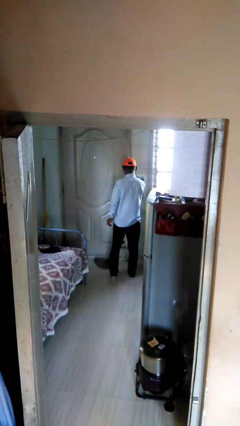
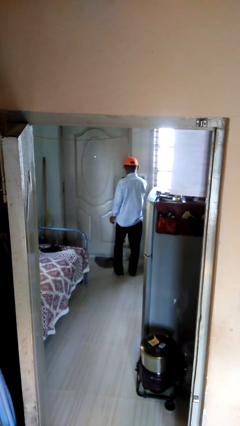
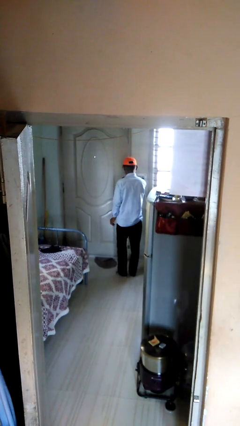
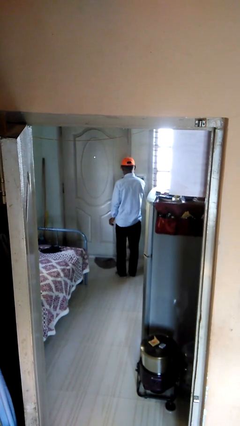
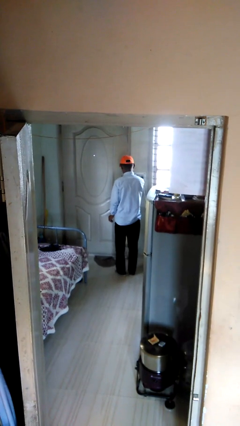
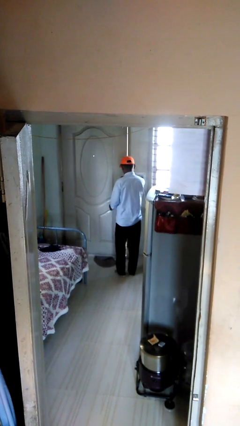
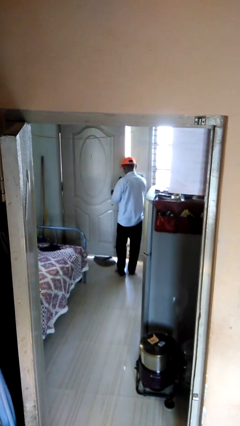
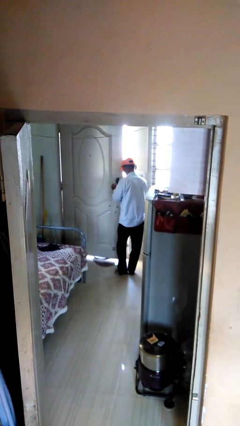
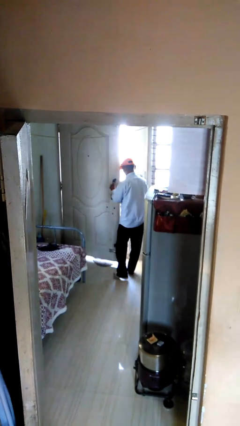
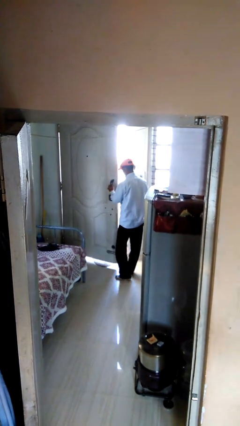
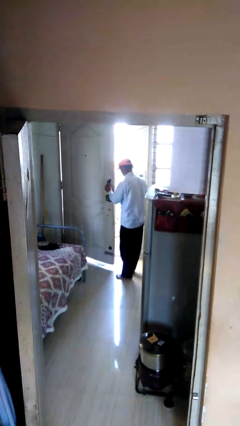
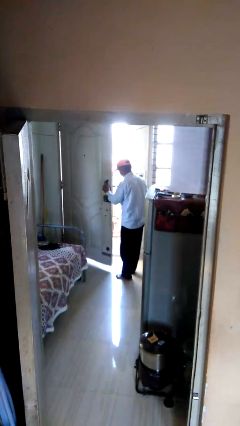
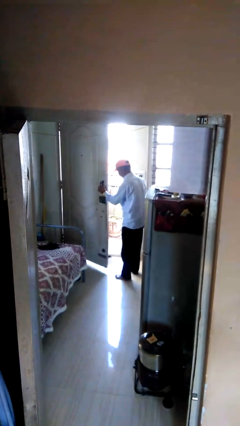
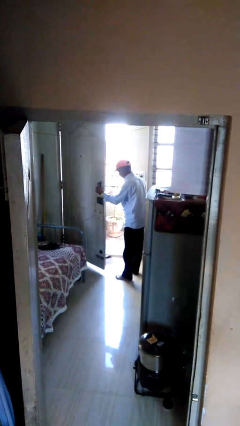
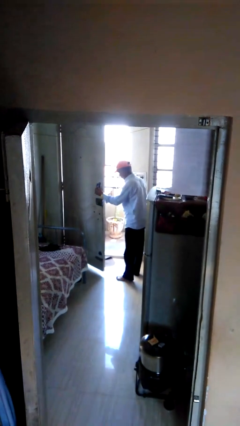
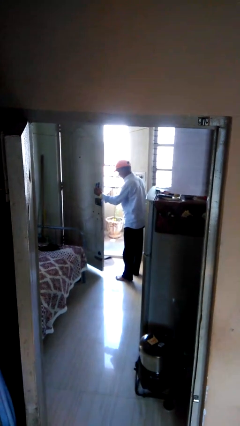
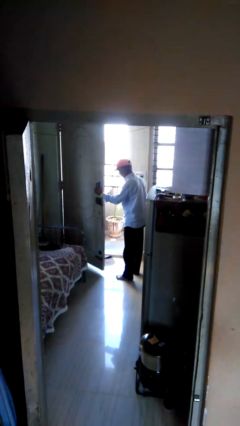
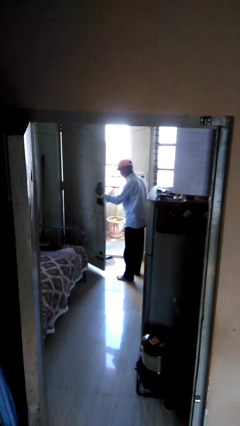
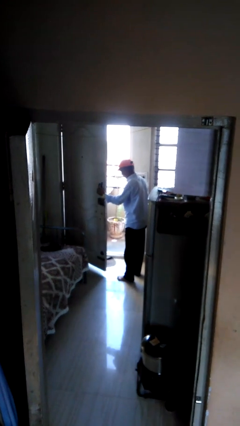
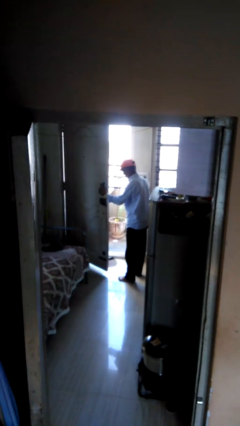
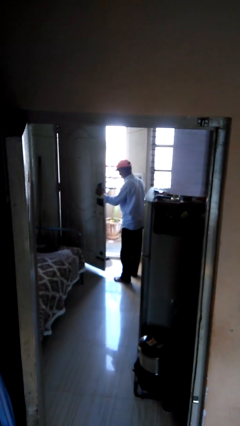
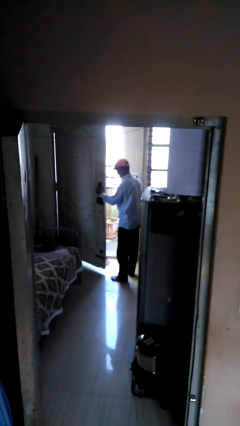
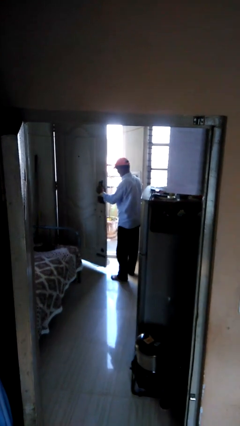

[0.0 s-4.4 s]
person opens facility door

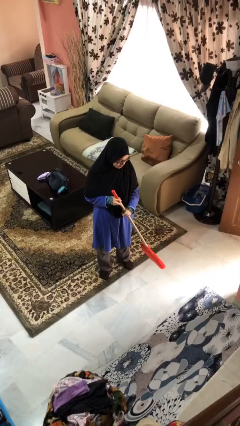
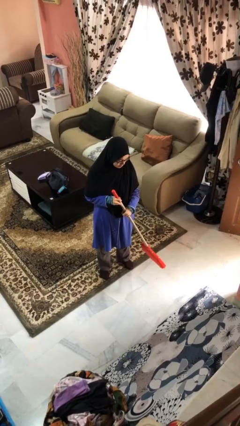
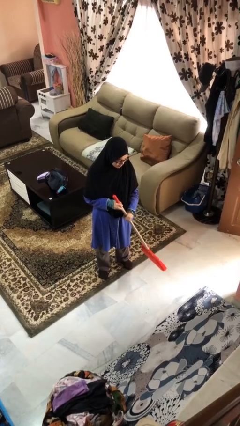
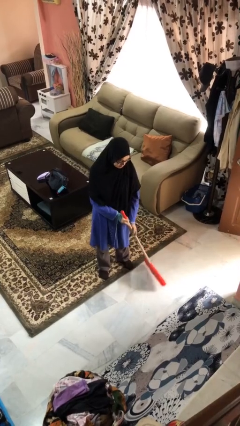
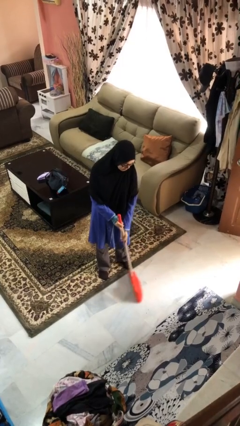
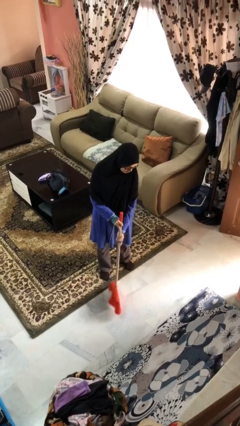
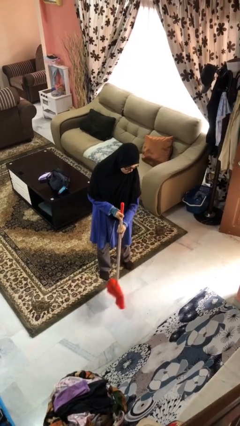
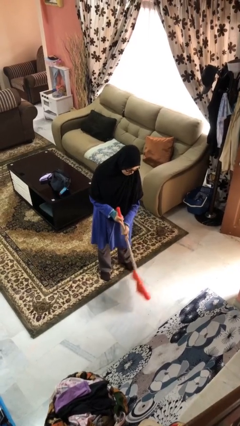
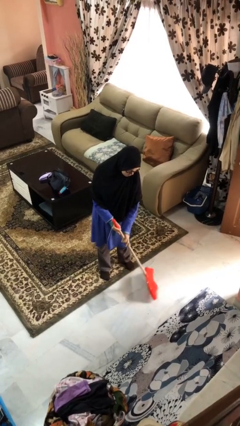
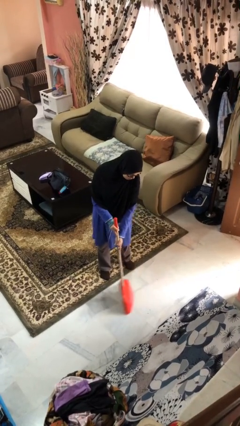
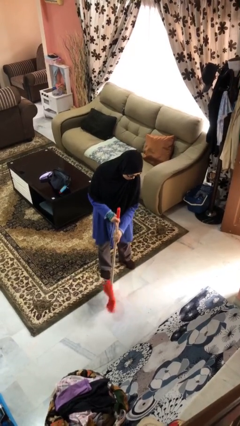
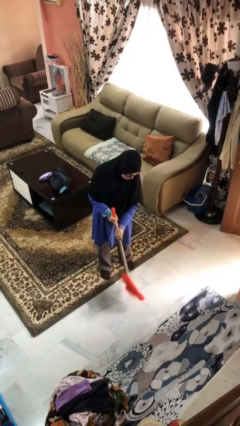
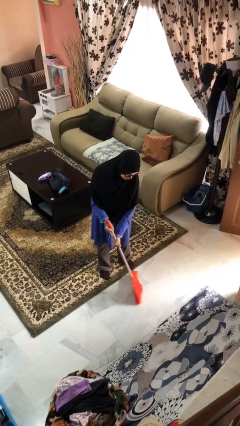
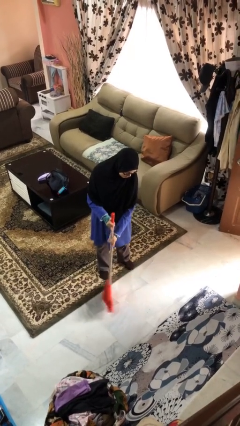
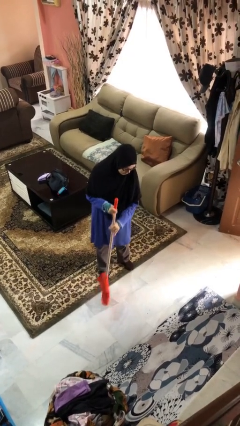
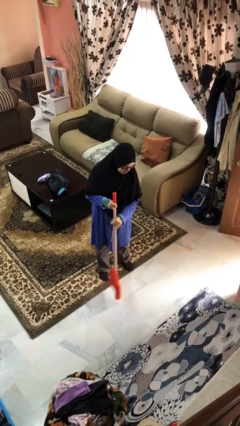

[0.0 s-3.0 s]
person sweeps floor

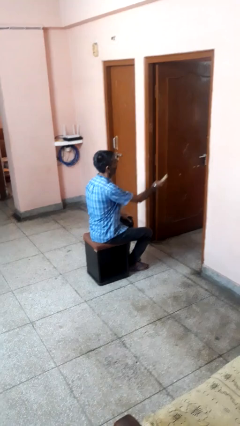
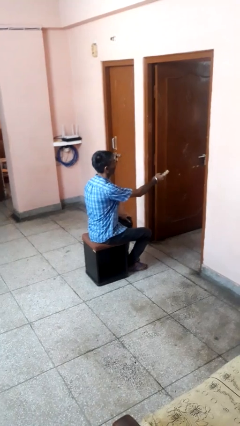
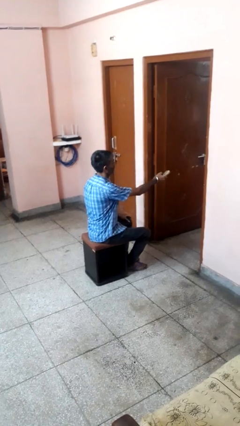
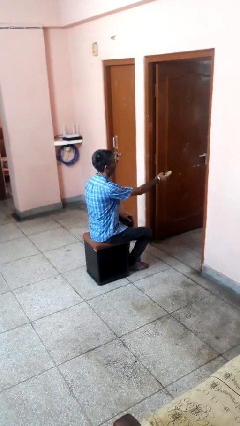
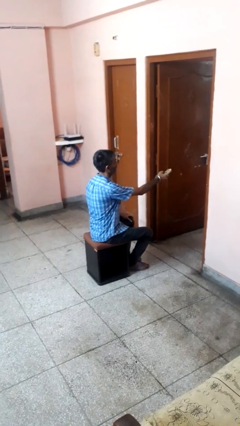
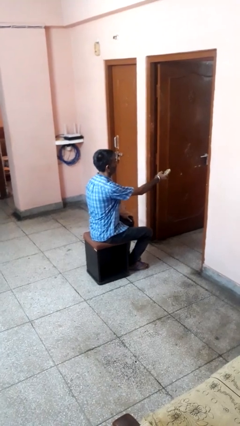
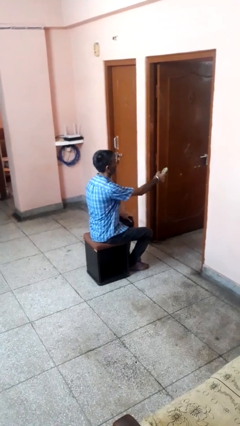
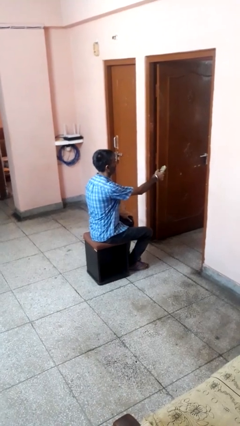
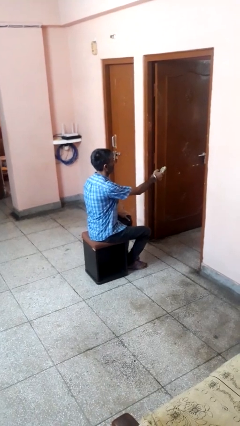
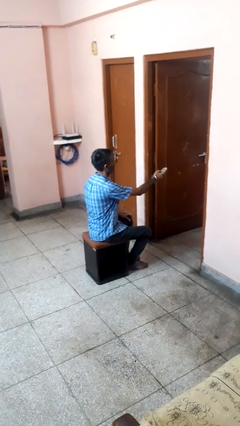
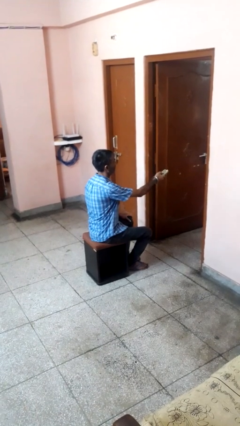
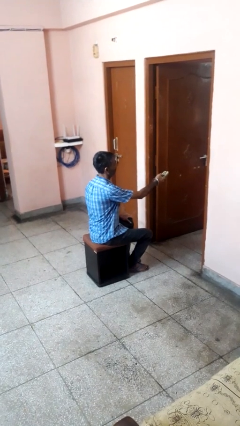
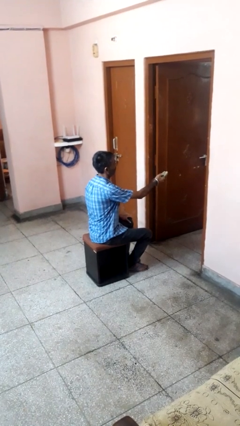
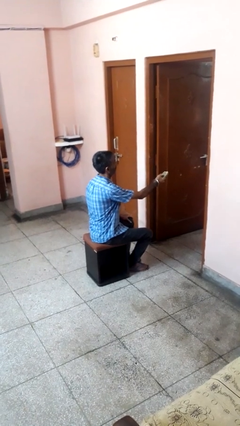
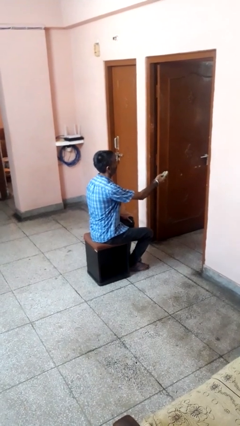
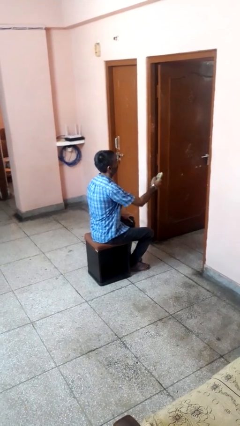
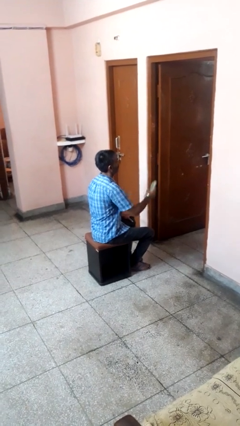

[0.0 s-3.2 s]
person uses television remote

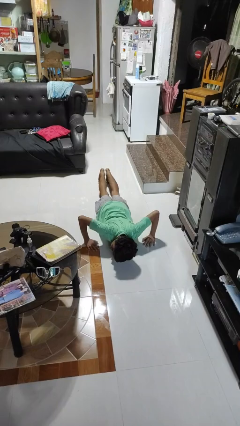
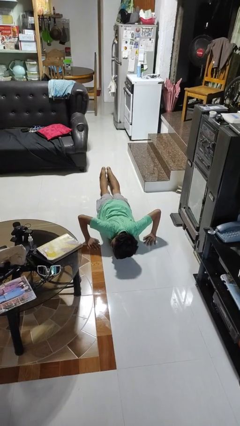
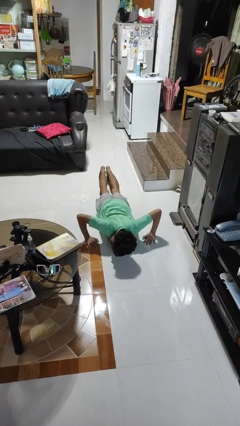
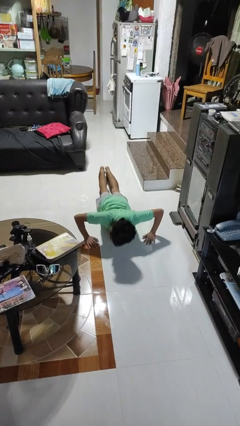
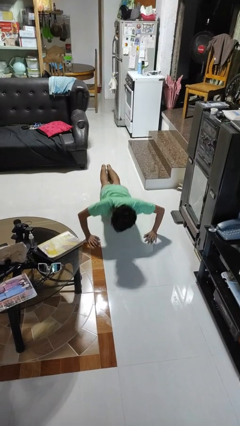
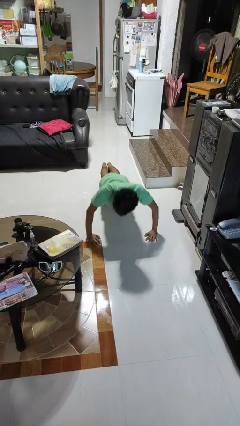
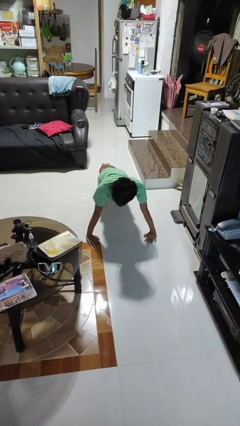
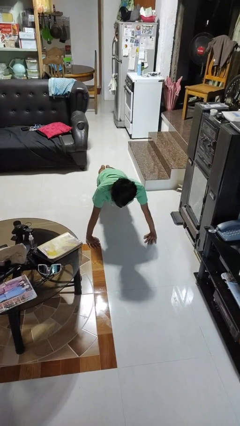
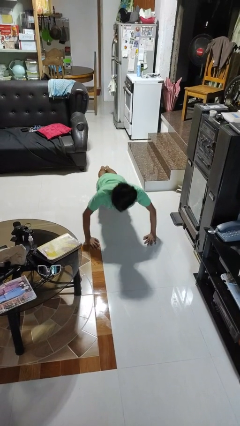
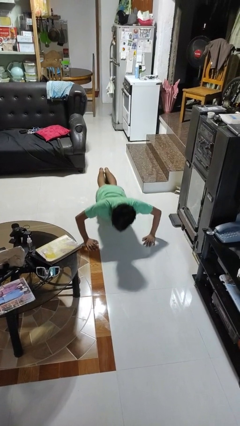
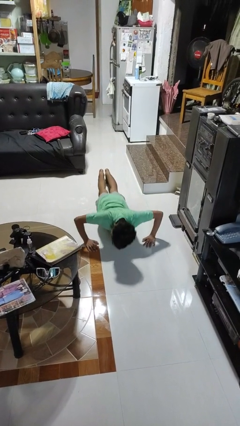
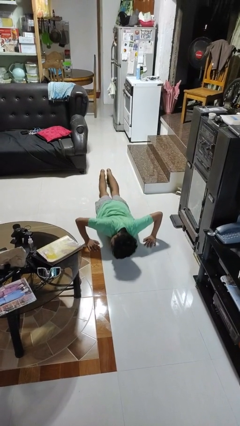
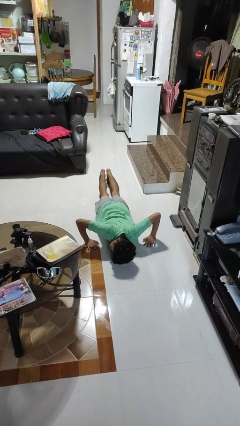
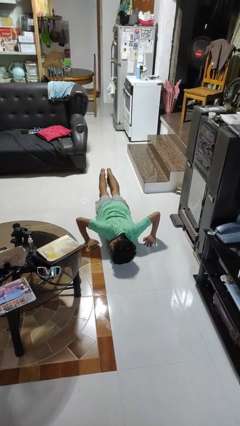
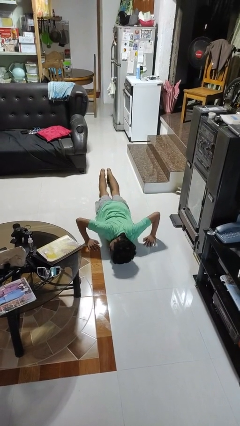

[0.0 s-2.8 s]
person exercises with pushup

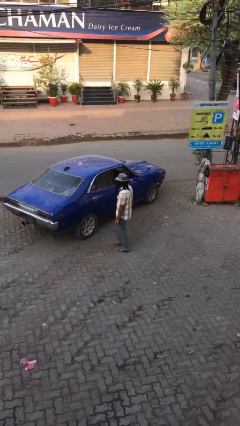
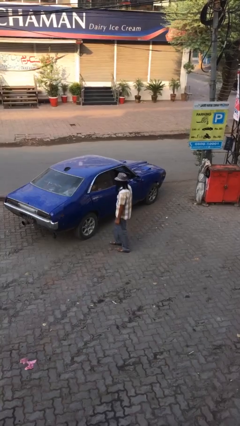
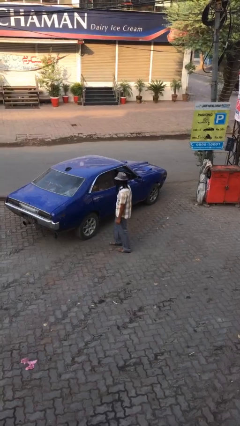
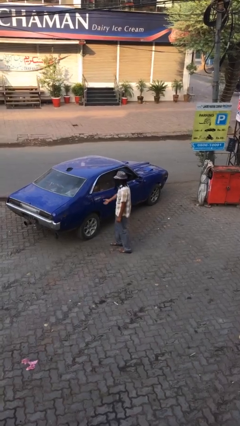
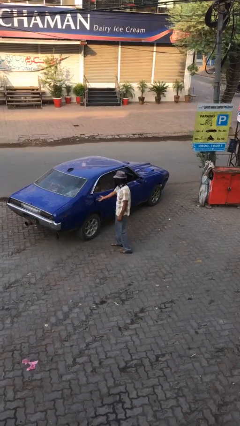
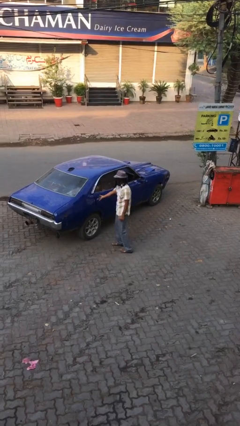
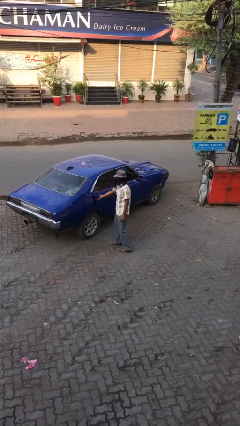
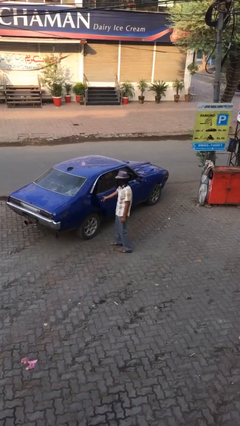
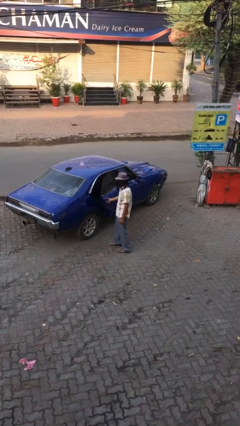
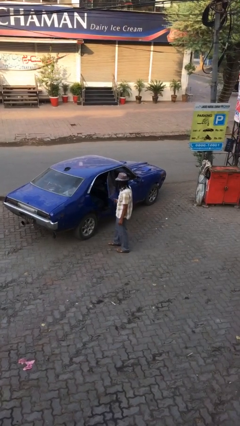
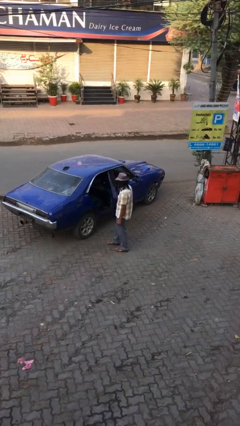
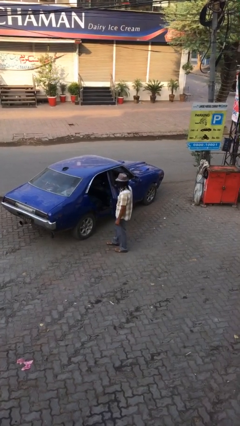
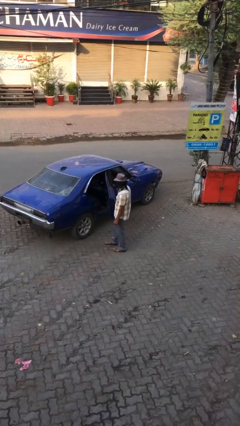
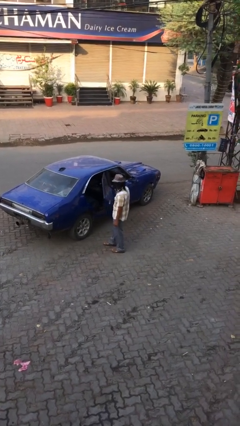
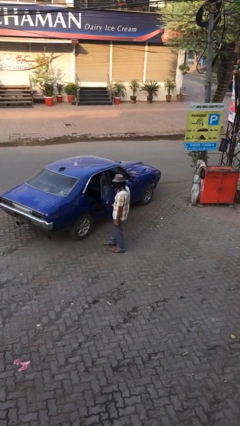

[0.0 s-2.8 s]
person opens car door

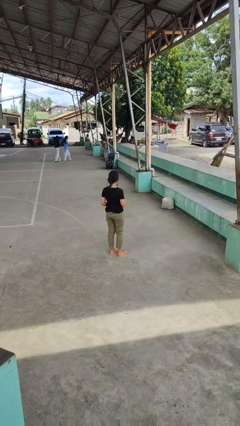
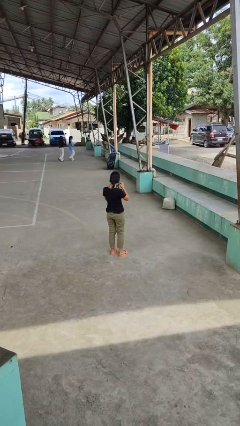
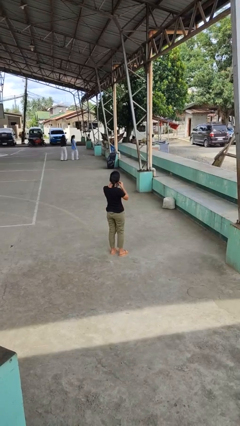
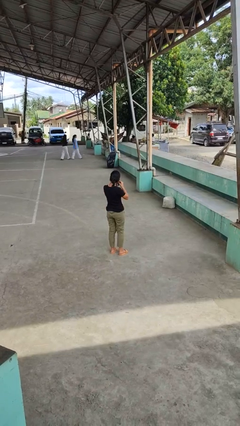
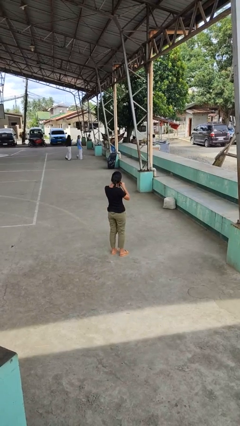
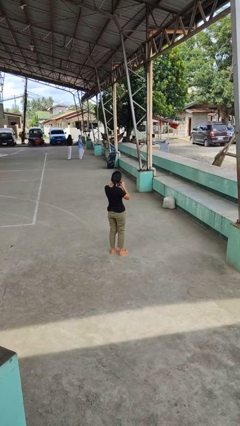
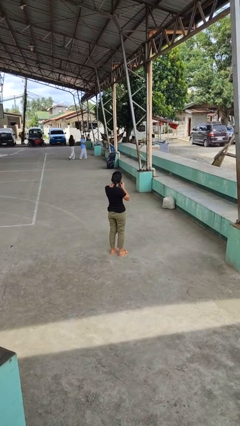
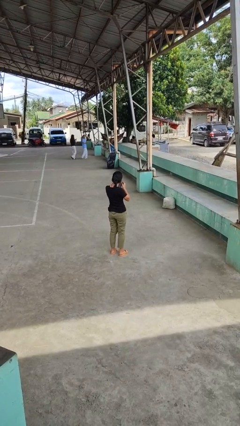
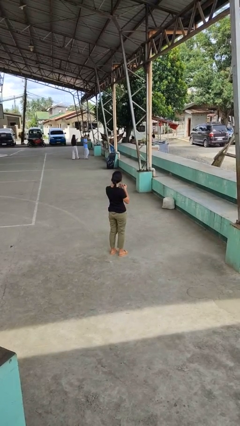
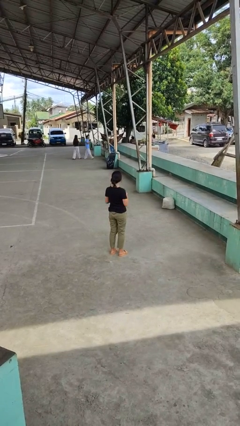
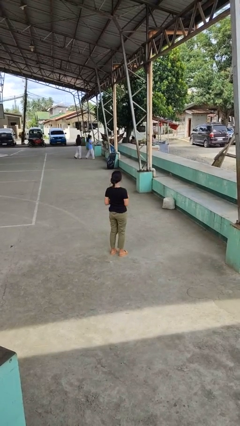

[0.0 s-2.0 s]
person takes off earrings
